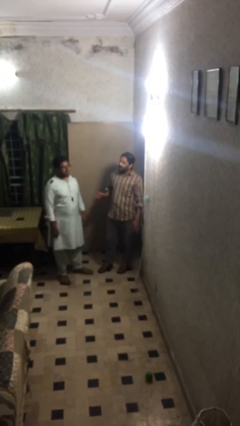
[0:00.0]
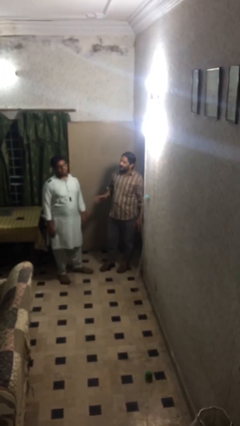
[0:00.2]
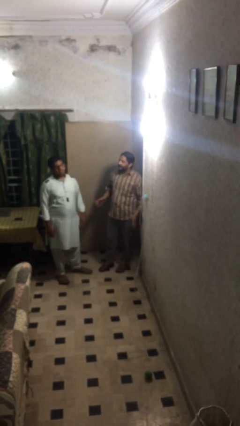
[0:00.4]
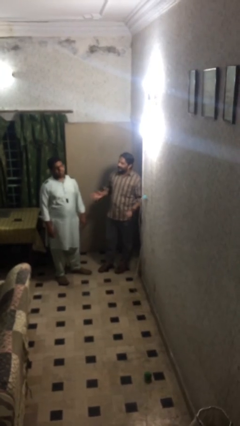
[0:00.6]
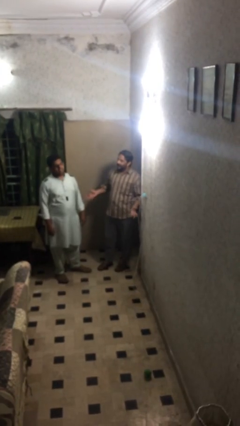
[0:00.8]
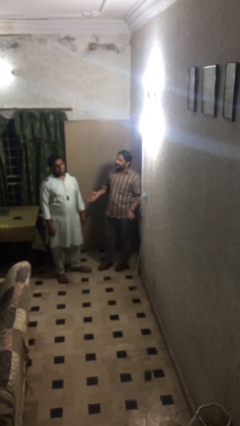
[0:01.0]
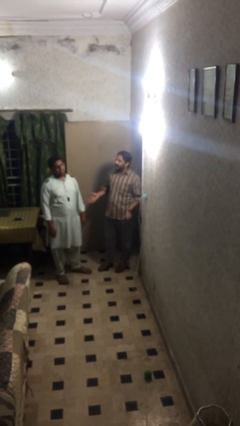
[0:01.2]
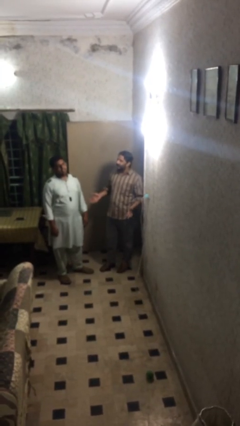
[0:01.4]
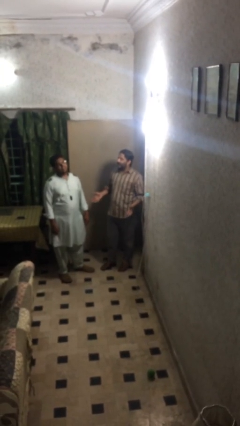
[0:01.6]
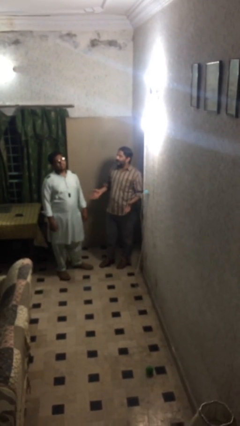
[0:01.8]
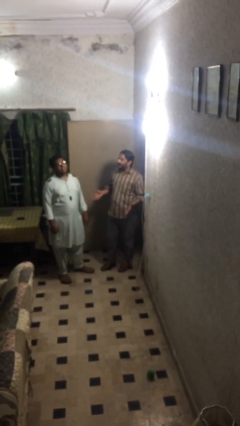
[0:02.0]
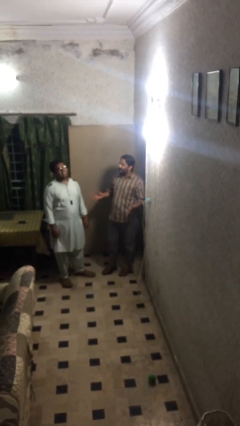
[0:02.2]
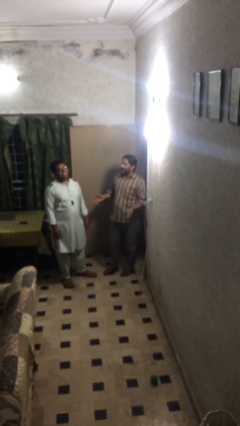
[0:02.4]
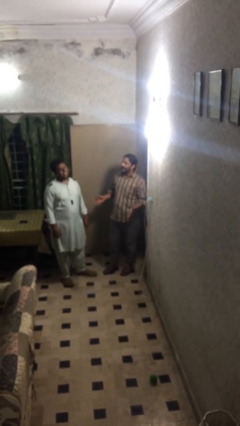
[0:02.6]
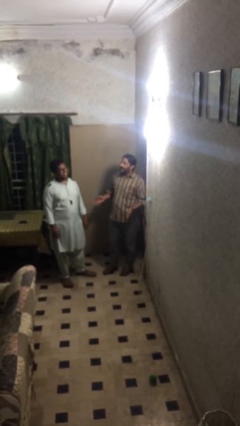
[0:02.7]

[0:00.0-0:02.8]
person talks to person

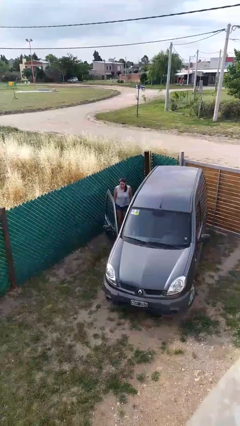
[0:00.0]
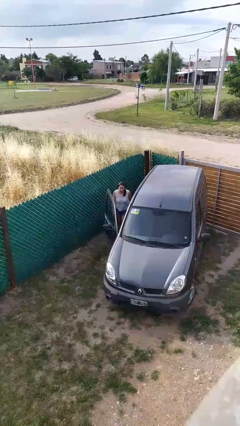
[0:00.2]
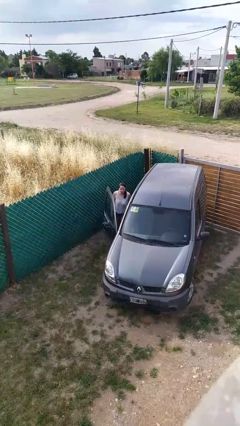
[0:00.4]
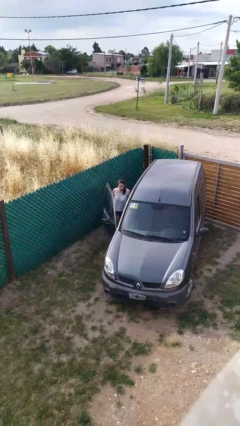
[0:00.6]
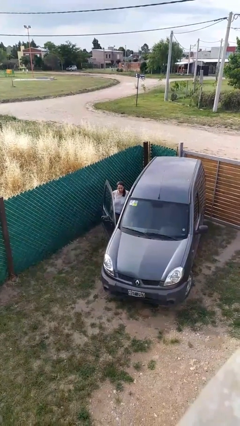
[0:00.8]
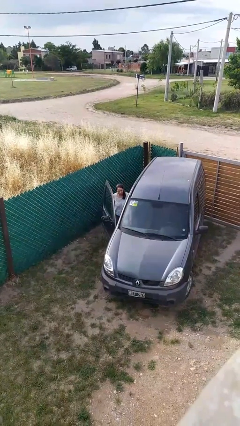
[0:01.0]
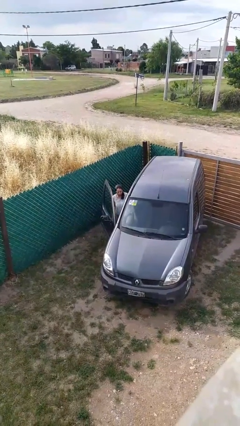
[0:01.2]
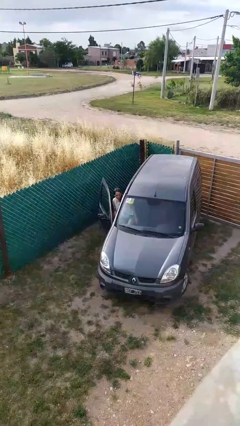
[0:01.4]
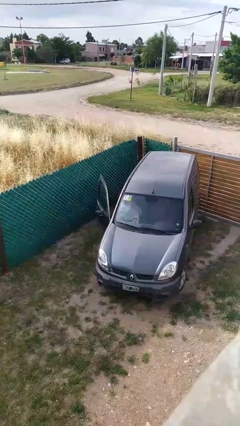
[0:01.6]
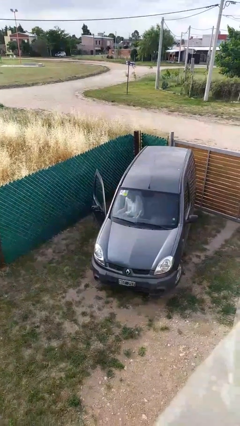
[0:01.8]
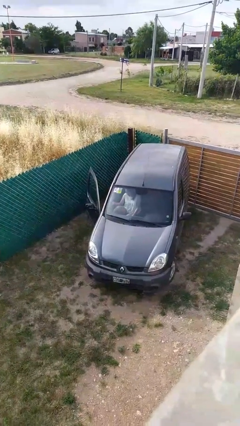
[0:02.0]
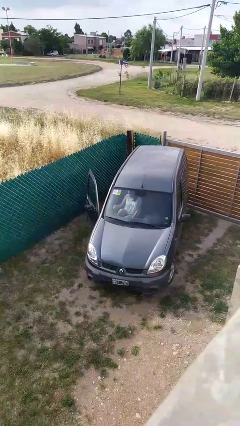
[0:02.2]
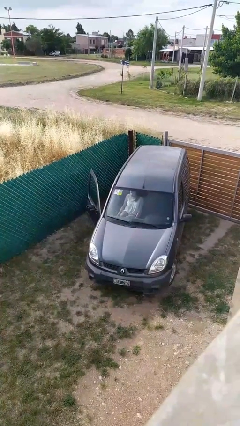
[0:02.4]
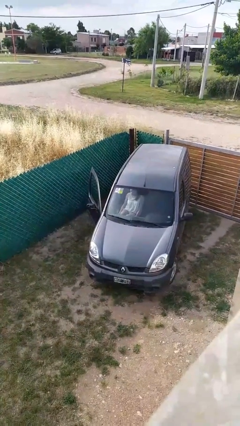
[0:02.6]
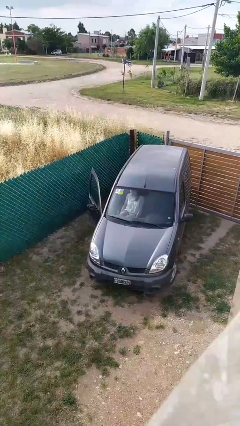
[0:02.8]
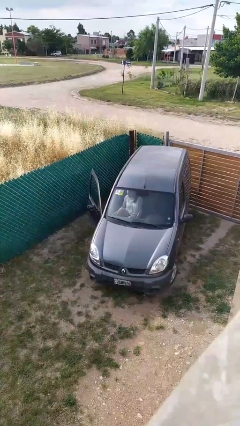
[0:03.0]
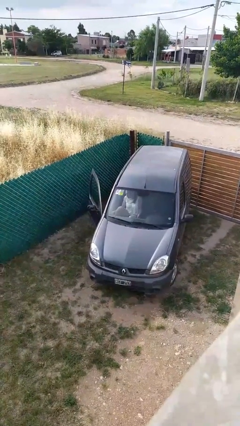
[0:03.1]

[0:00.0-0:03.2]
person enters car

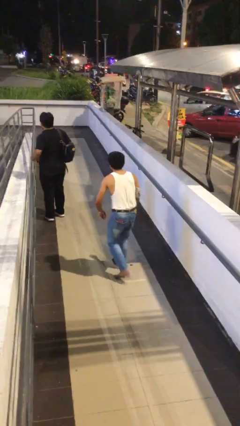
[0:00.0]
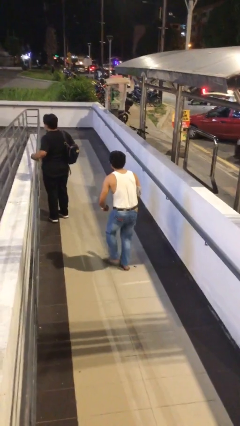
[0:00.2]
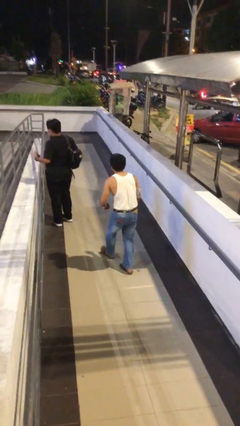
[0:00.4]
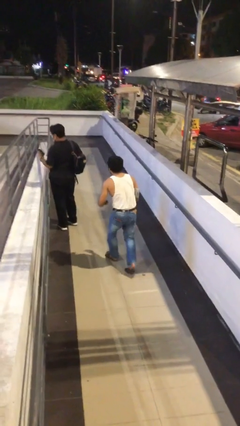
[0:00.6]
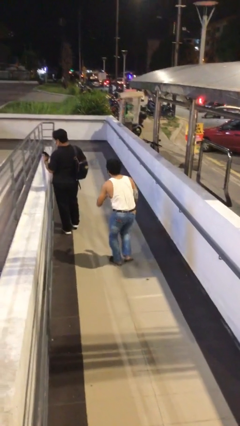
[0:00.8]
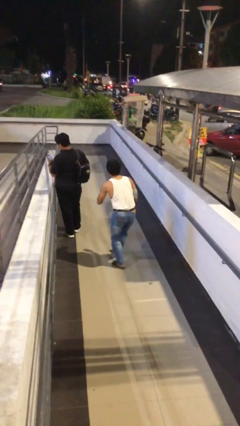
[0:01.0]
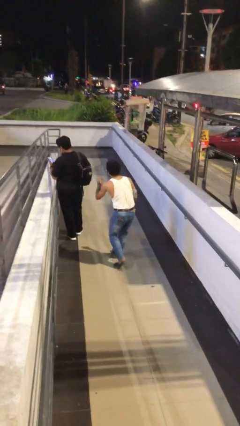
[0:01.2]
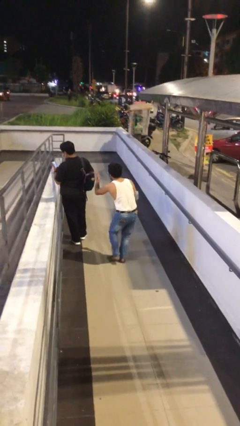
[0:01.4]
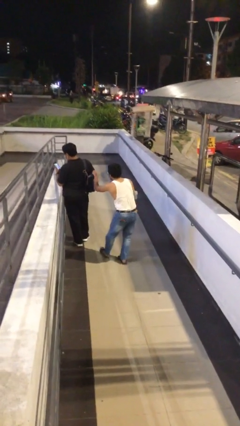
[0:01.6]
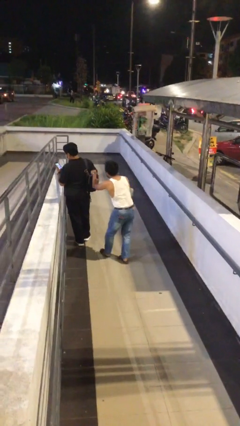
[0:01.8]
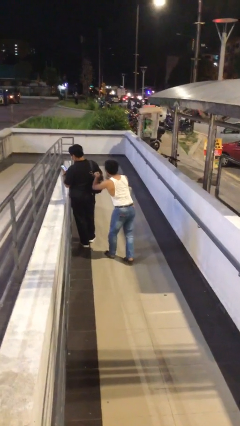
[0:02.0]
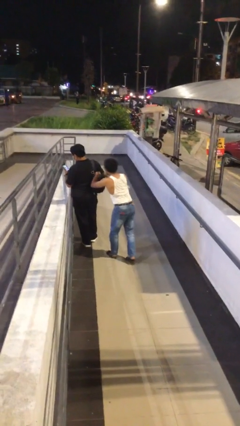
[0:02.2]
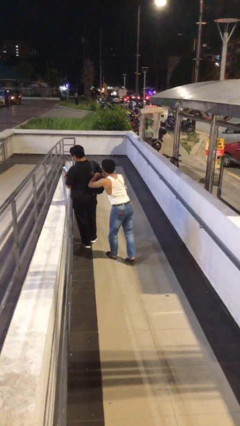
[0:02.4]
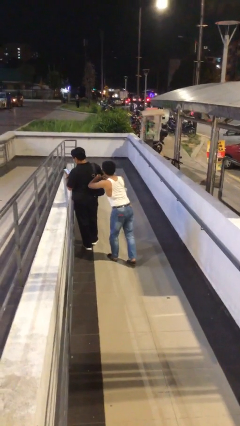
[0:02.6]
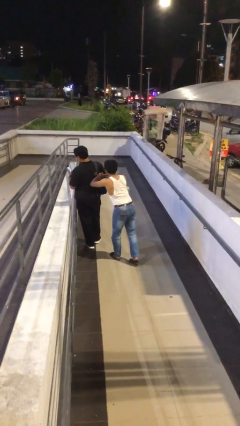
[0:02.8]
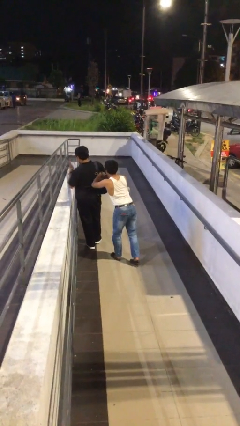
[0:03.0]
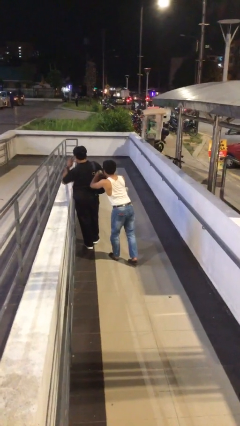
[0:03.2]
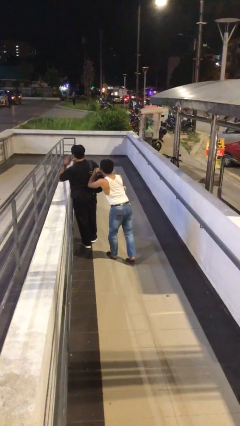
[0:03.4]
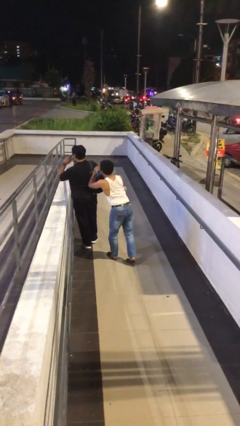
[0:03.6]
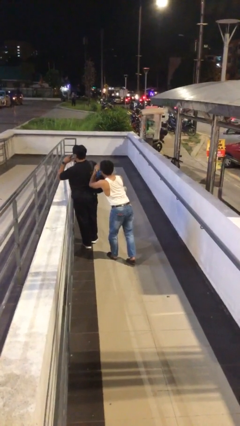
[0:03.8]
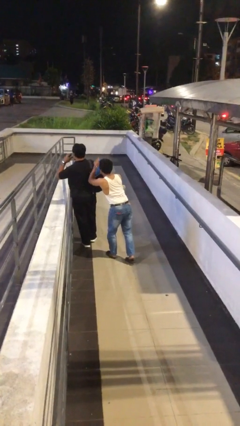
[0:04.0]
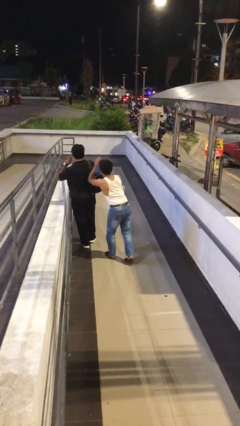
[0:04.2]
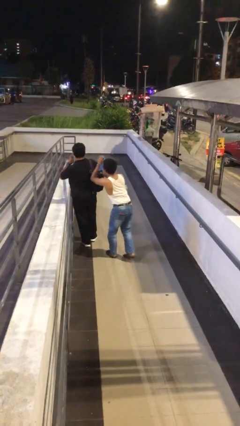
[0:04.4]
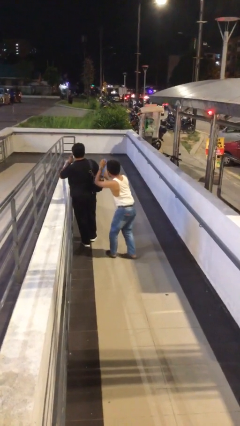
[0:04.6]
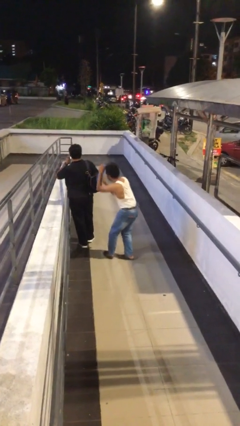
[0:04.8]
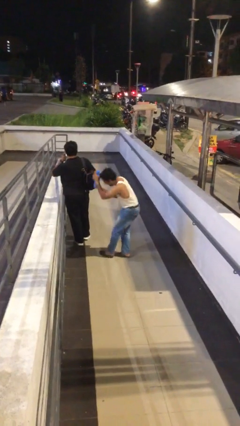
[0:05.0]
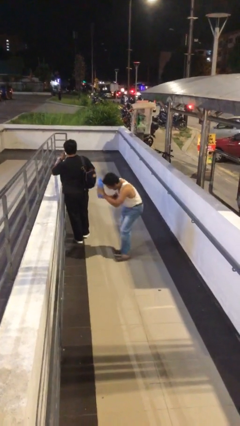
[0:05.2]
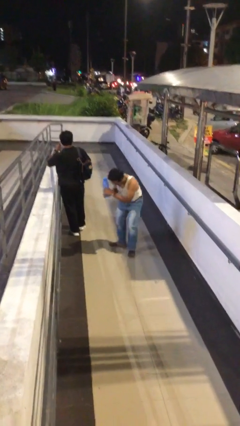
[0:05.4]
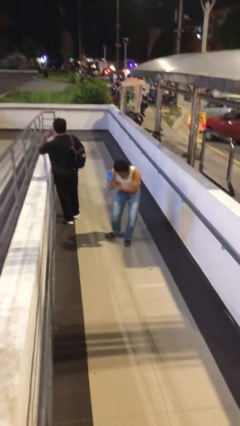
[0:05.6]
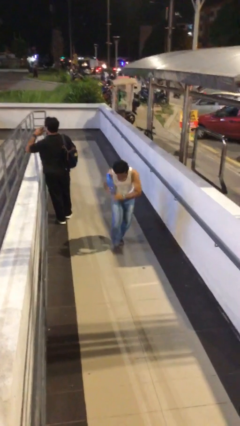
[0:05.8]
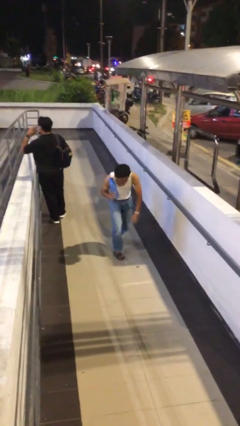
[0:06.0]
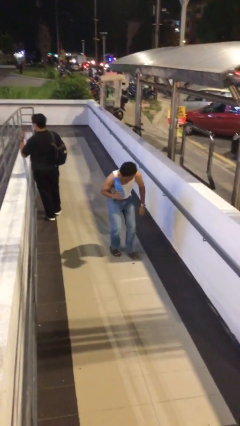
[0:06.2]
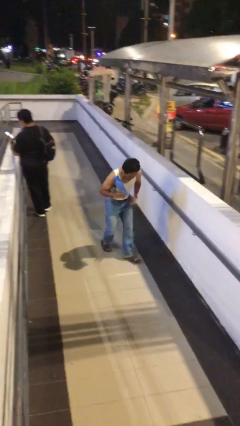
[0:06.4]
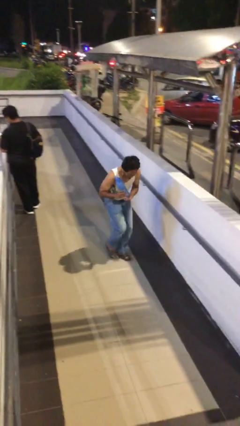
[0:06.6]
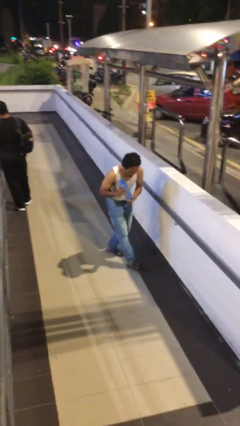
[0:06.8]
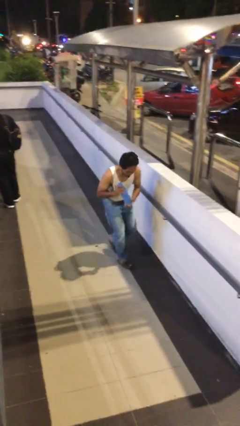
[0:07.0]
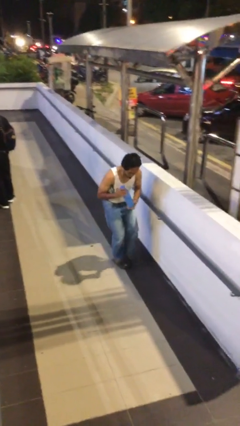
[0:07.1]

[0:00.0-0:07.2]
person steals object from person

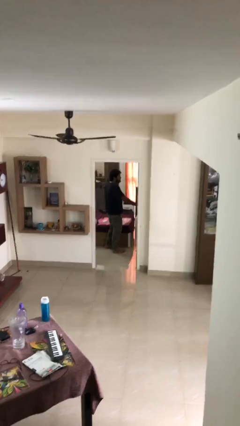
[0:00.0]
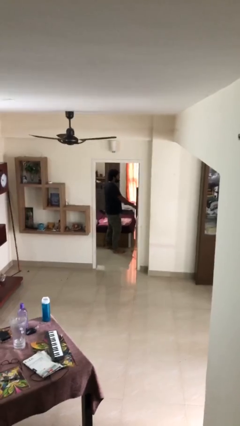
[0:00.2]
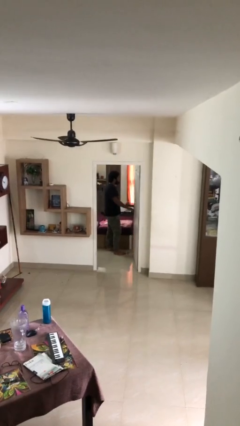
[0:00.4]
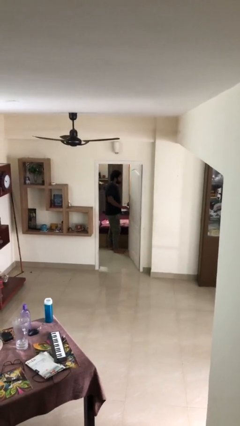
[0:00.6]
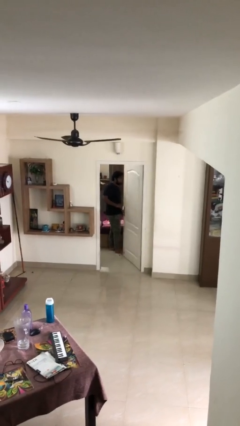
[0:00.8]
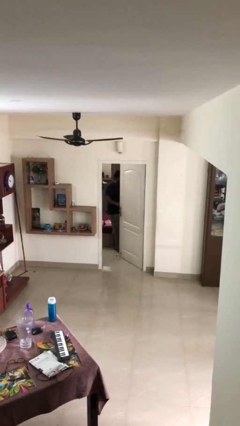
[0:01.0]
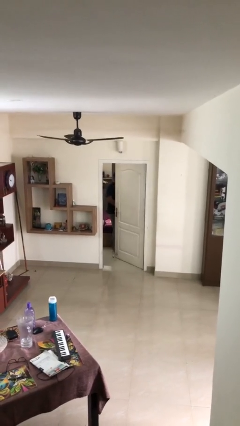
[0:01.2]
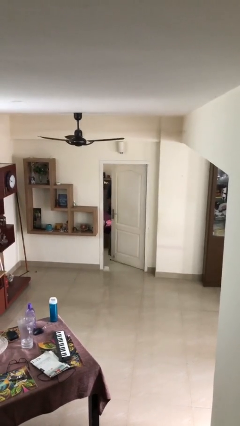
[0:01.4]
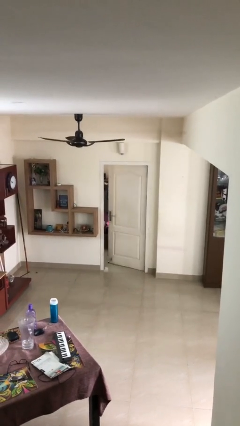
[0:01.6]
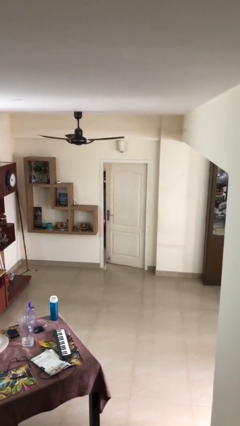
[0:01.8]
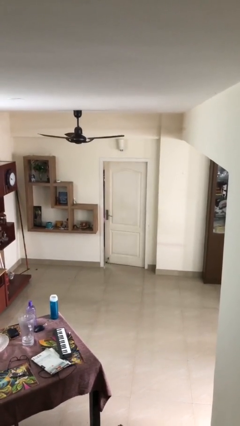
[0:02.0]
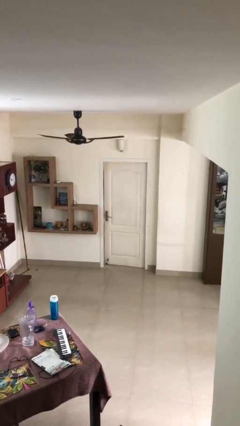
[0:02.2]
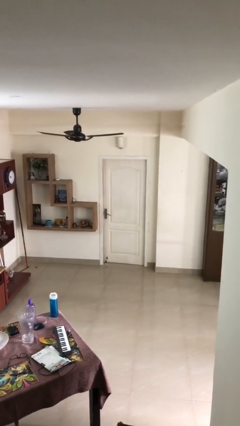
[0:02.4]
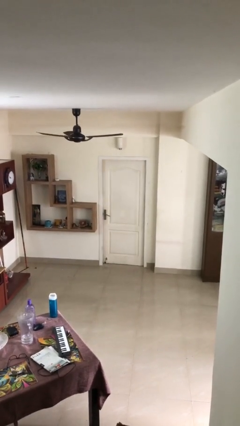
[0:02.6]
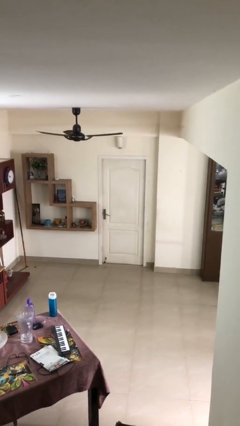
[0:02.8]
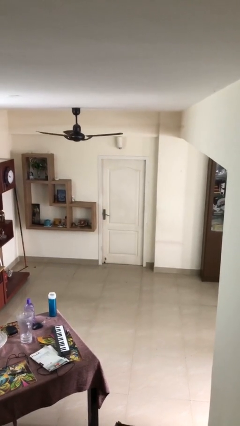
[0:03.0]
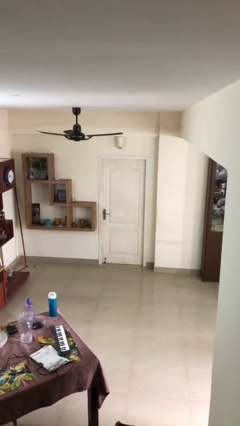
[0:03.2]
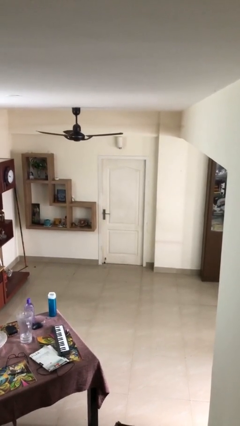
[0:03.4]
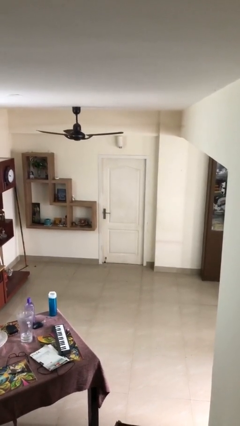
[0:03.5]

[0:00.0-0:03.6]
person closes facility door

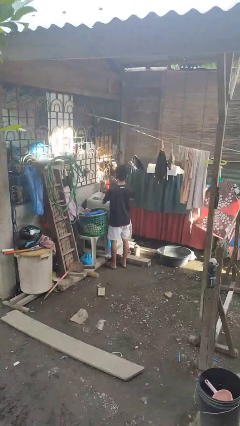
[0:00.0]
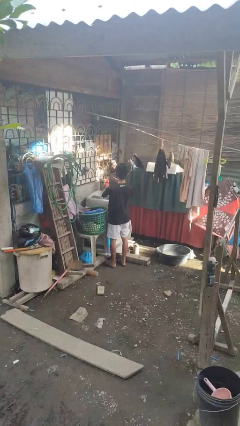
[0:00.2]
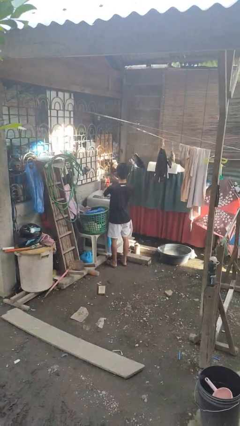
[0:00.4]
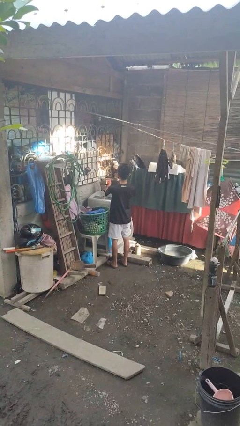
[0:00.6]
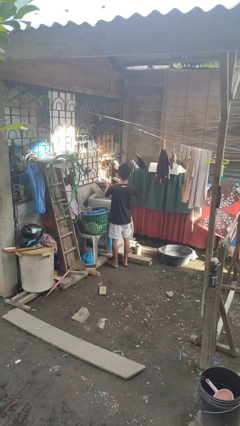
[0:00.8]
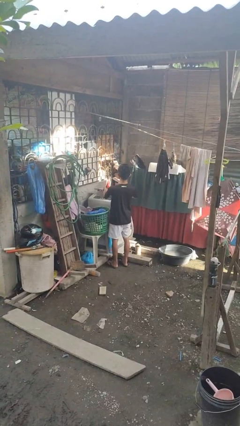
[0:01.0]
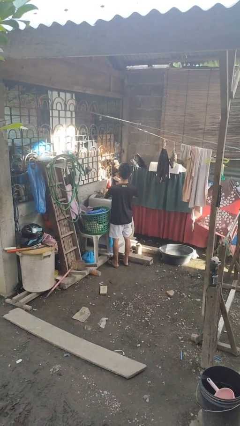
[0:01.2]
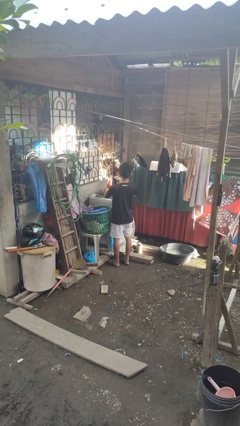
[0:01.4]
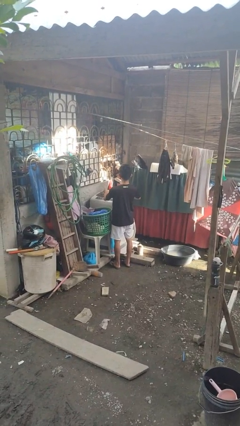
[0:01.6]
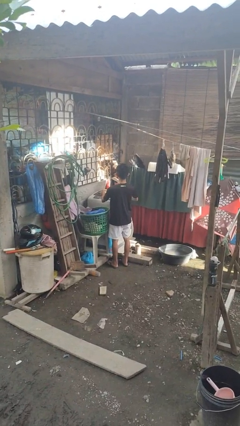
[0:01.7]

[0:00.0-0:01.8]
person closes clothes washer
